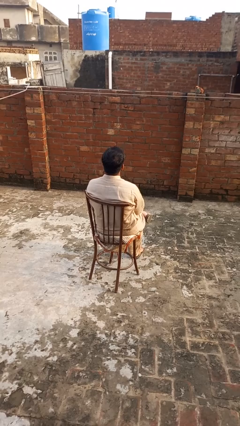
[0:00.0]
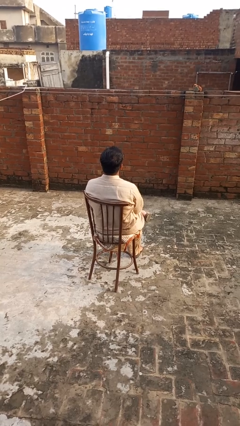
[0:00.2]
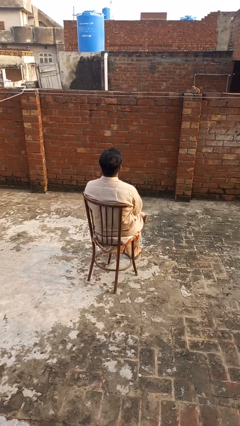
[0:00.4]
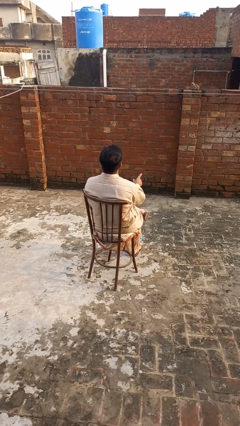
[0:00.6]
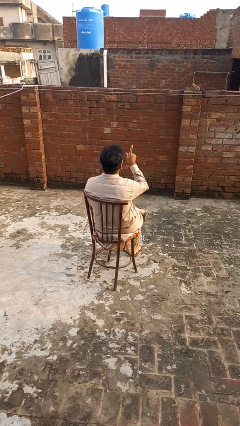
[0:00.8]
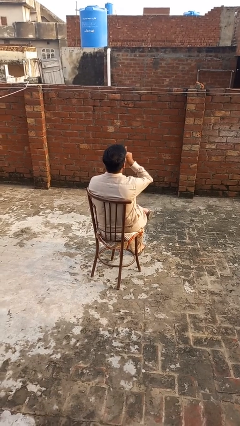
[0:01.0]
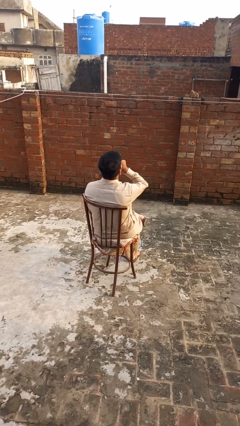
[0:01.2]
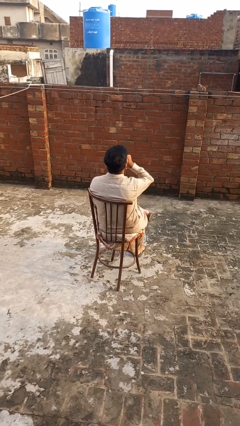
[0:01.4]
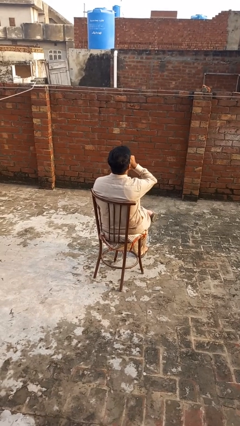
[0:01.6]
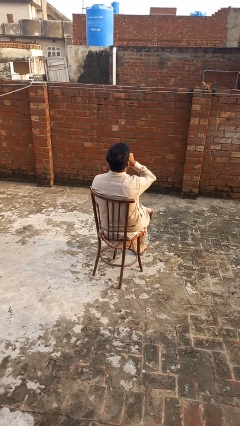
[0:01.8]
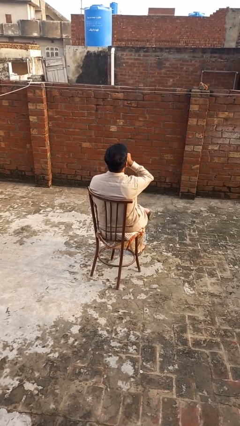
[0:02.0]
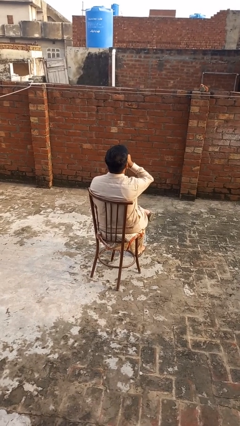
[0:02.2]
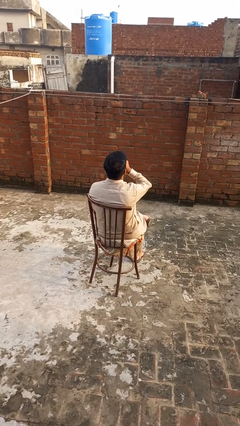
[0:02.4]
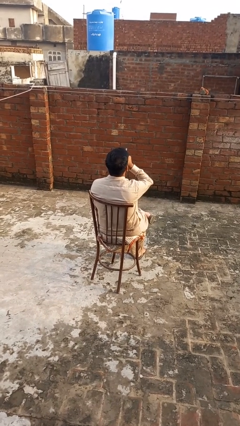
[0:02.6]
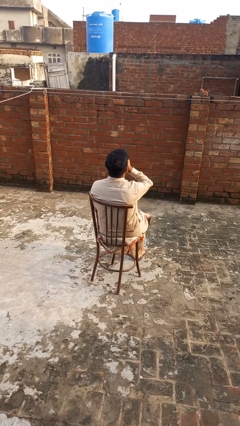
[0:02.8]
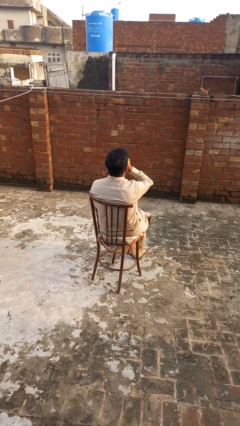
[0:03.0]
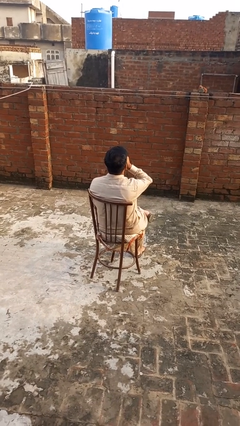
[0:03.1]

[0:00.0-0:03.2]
person gestures be quiet

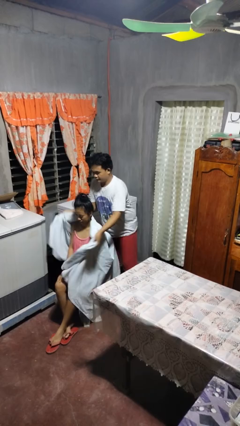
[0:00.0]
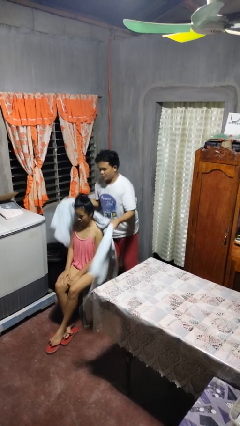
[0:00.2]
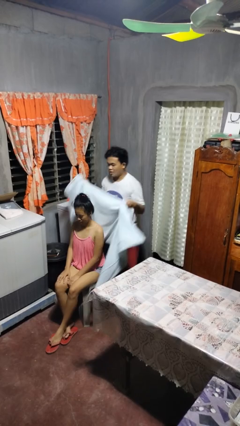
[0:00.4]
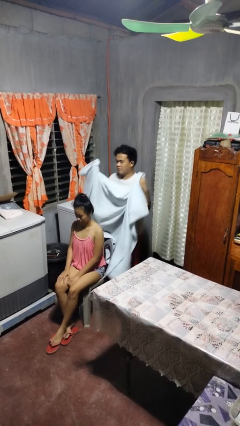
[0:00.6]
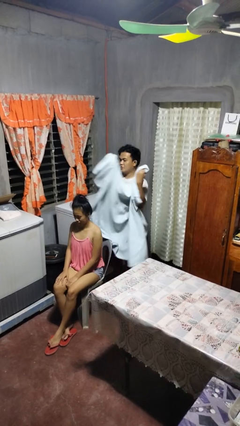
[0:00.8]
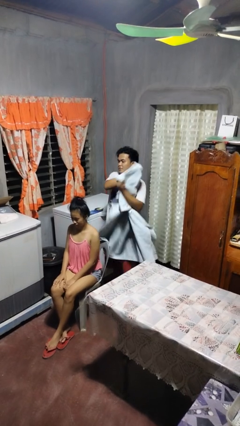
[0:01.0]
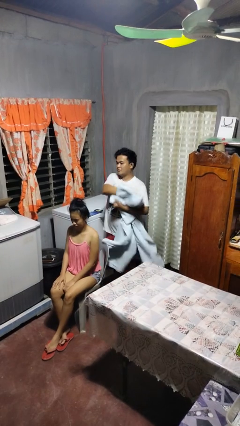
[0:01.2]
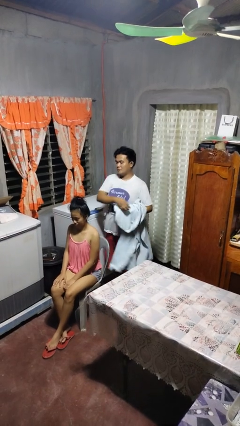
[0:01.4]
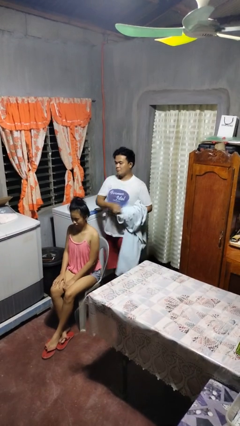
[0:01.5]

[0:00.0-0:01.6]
person uncovers friend with blanket

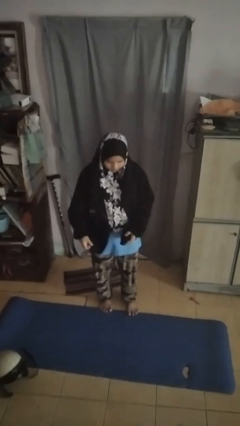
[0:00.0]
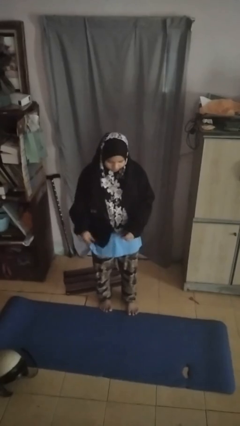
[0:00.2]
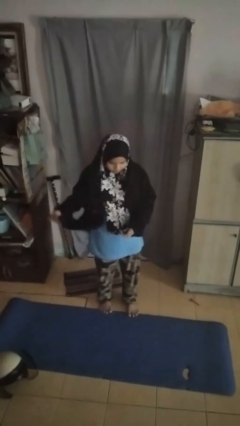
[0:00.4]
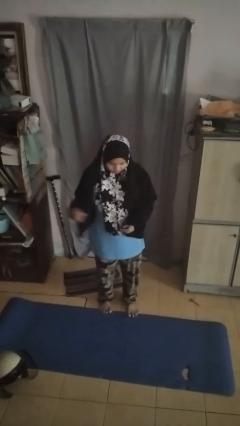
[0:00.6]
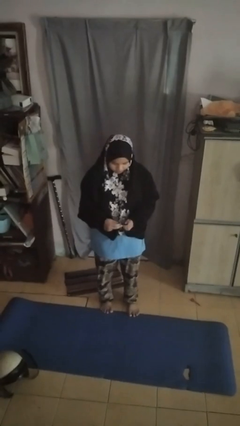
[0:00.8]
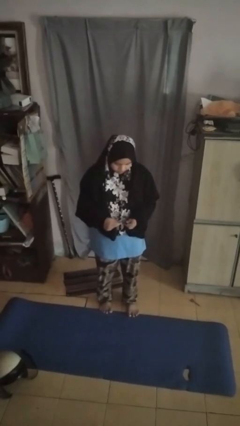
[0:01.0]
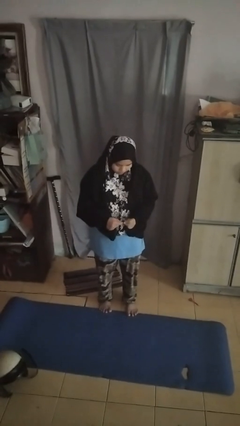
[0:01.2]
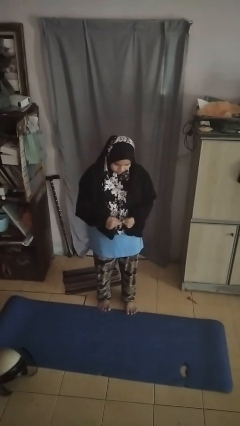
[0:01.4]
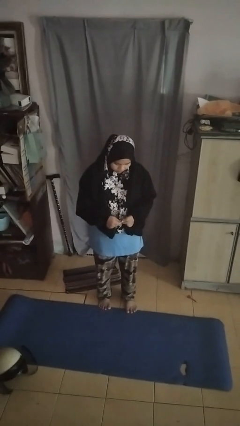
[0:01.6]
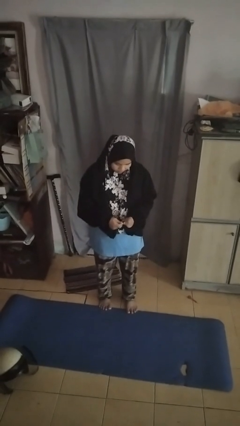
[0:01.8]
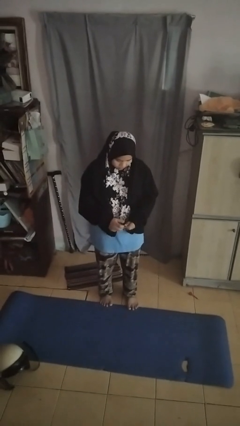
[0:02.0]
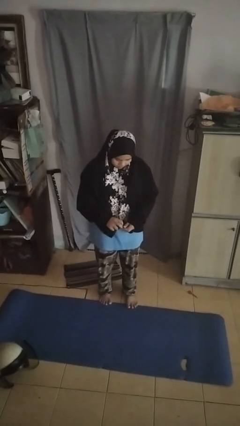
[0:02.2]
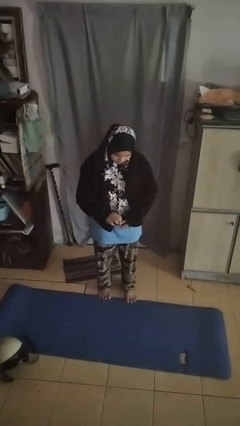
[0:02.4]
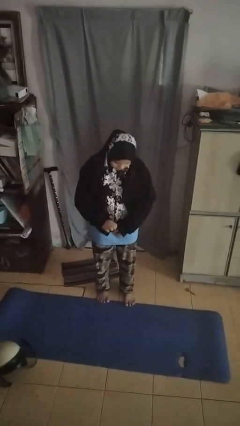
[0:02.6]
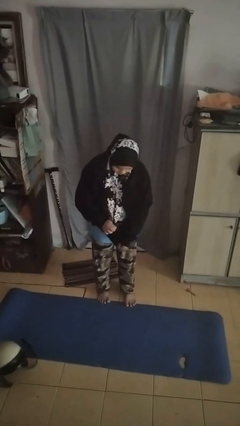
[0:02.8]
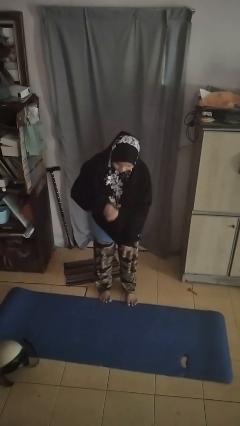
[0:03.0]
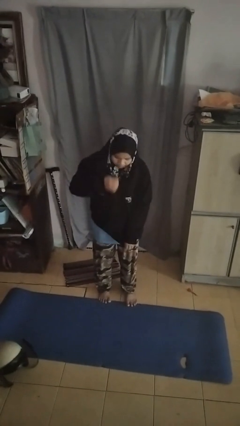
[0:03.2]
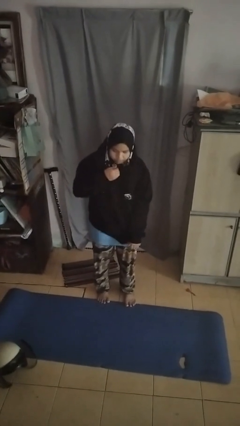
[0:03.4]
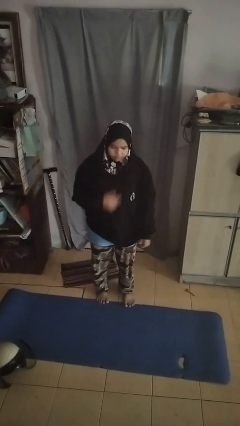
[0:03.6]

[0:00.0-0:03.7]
person zips up jacket

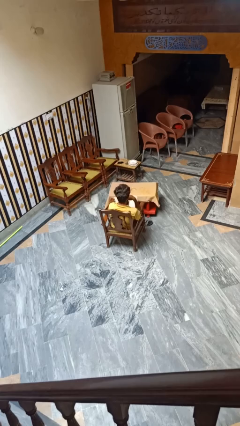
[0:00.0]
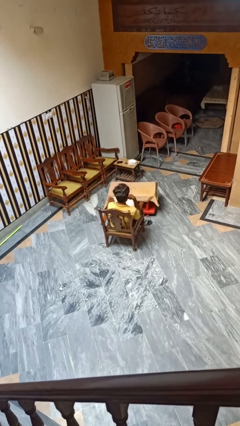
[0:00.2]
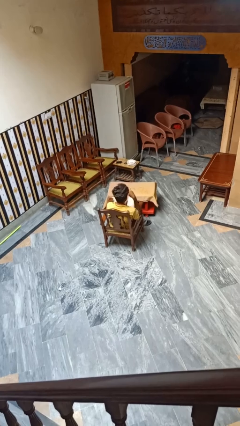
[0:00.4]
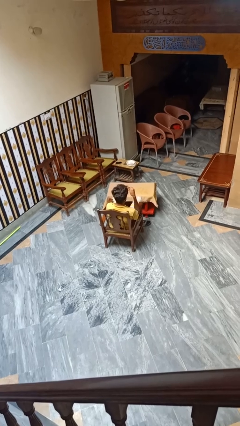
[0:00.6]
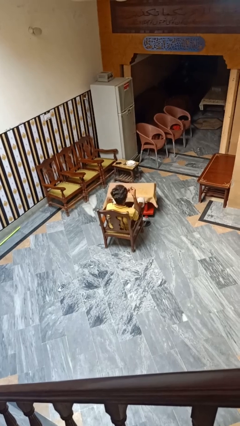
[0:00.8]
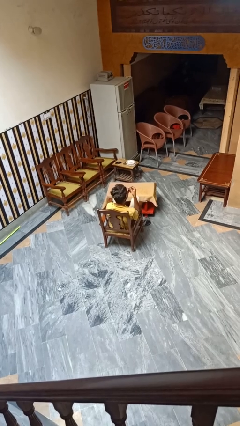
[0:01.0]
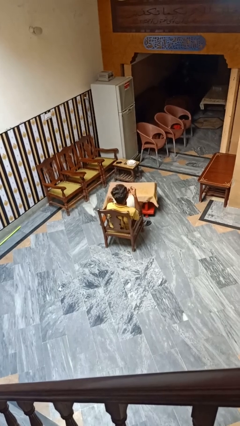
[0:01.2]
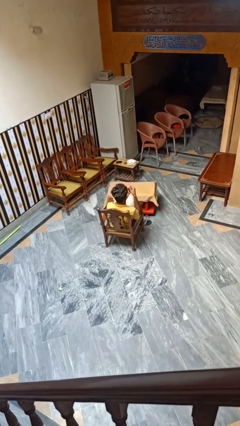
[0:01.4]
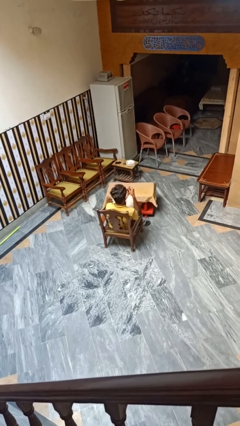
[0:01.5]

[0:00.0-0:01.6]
person clips fingernails

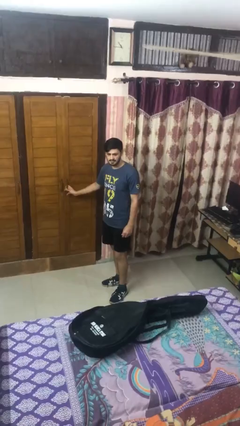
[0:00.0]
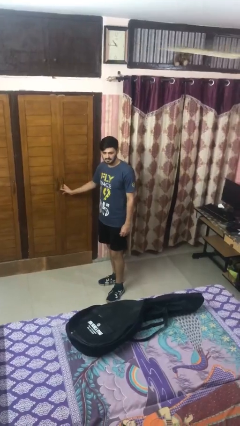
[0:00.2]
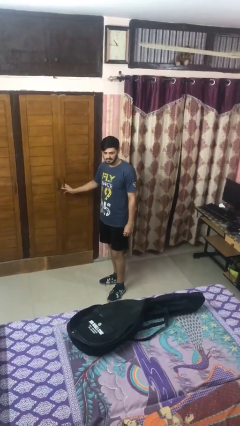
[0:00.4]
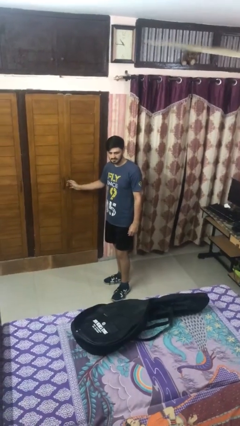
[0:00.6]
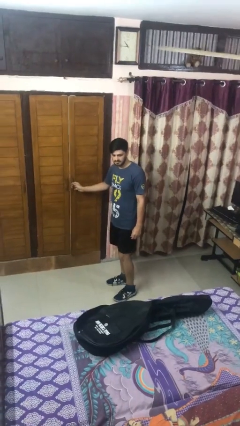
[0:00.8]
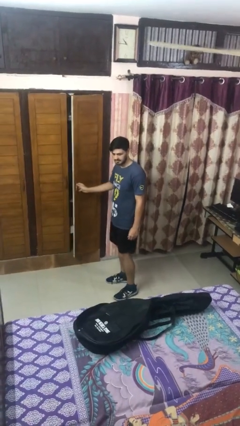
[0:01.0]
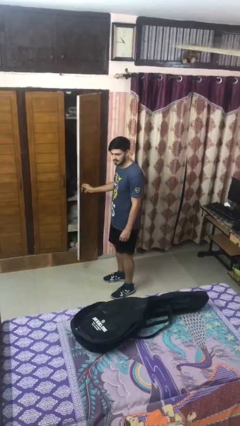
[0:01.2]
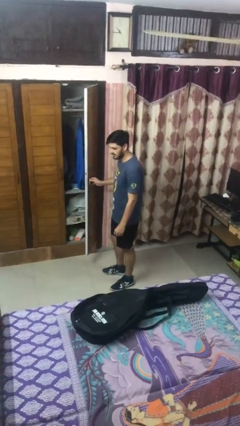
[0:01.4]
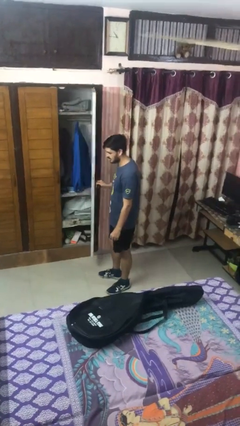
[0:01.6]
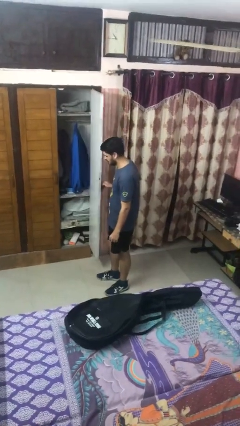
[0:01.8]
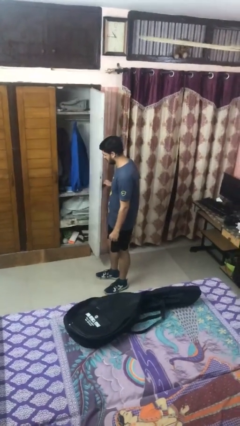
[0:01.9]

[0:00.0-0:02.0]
person opens closet door

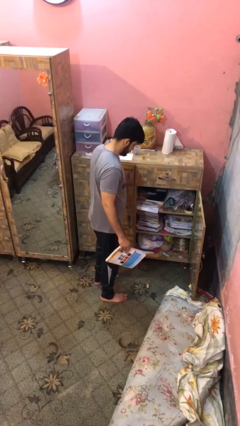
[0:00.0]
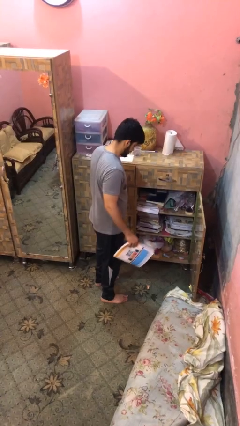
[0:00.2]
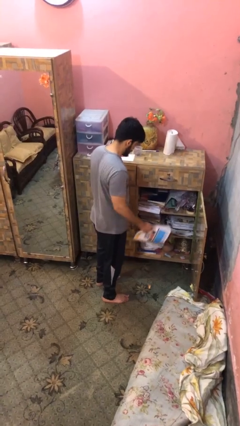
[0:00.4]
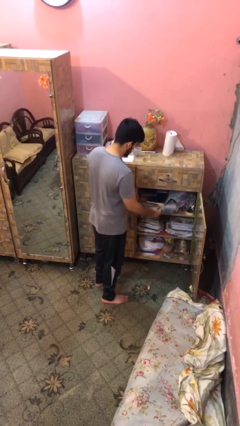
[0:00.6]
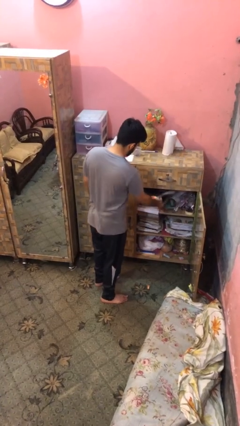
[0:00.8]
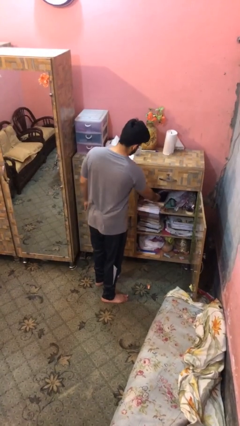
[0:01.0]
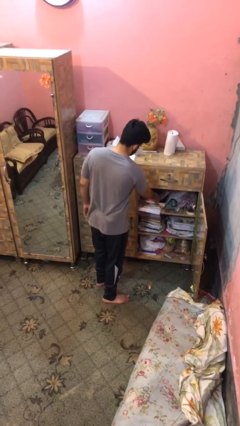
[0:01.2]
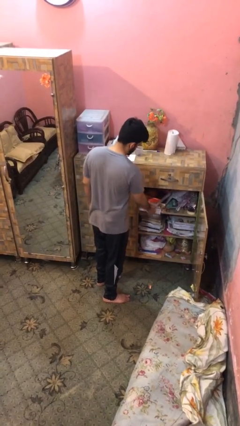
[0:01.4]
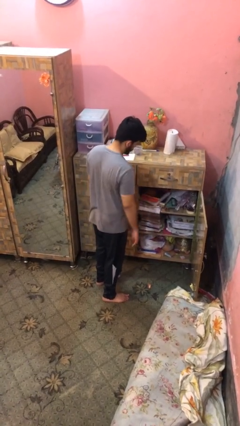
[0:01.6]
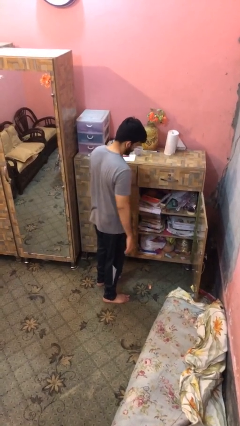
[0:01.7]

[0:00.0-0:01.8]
person puts down object into cabinet

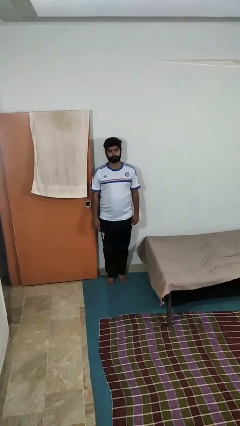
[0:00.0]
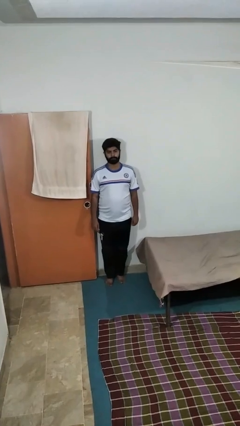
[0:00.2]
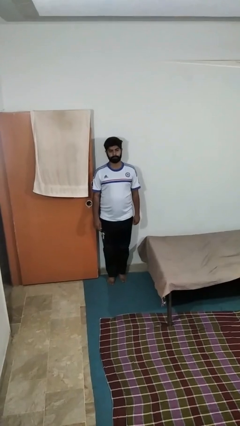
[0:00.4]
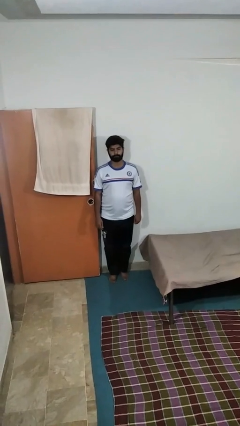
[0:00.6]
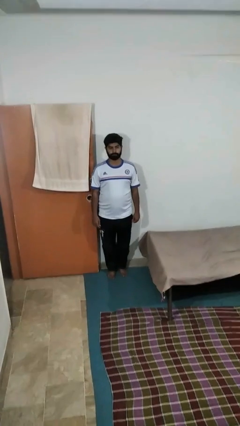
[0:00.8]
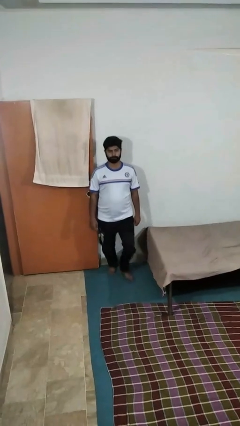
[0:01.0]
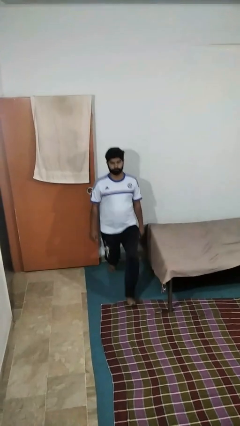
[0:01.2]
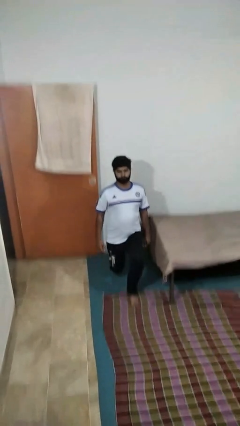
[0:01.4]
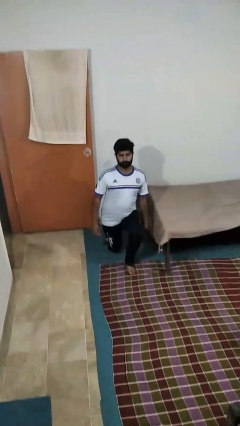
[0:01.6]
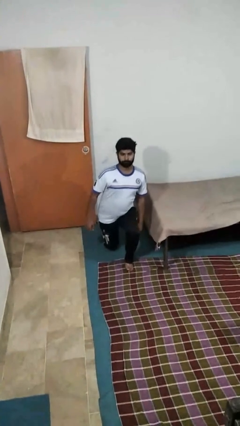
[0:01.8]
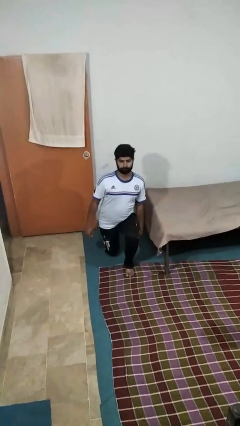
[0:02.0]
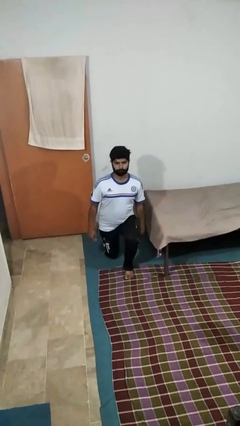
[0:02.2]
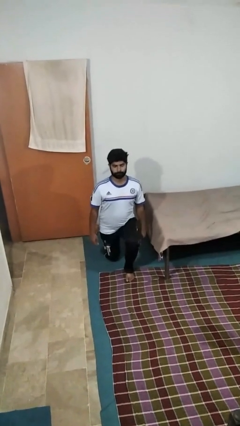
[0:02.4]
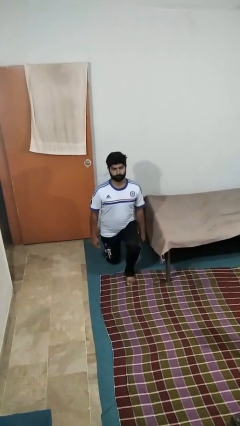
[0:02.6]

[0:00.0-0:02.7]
person kneels

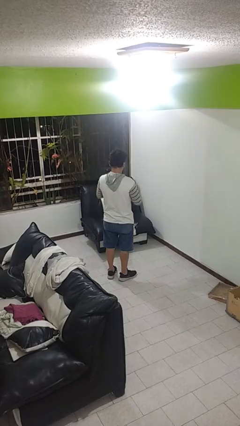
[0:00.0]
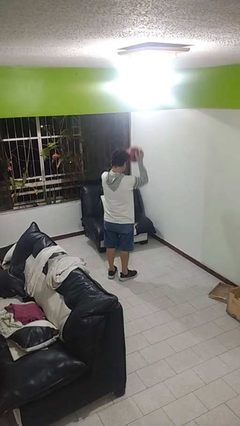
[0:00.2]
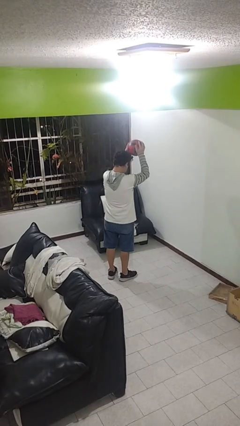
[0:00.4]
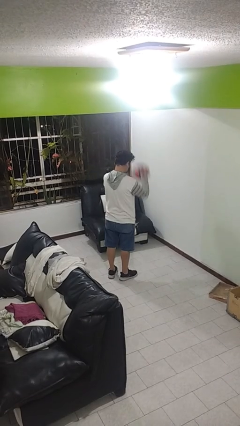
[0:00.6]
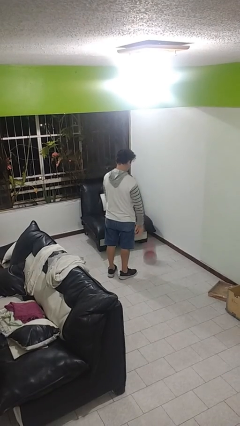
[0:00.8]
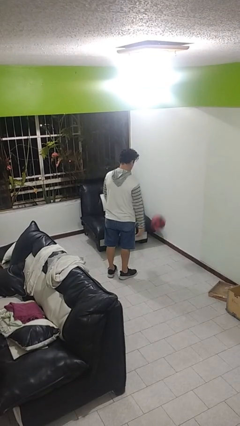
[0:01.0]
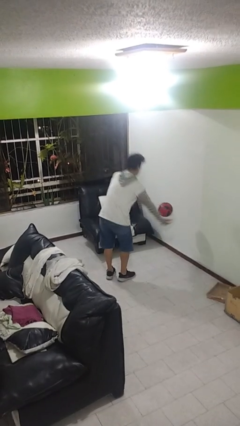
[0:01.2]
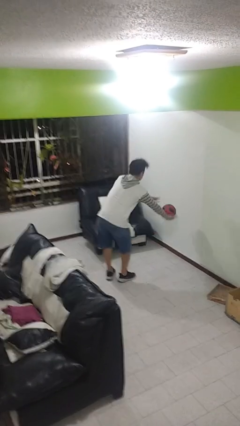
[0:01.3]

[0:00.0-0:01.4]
person bounces ball on floor
